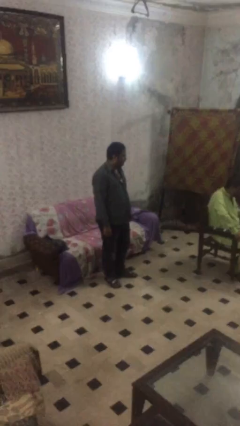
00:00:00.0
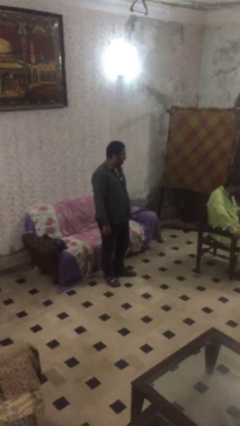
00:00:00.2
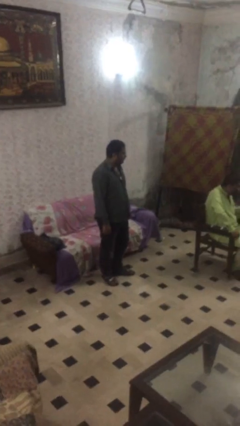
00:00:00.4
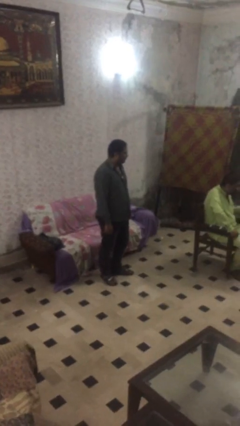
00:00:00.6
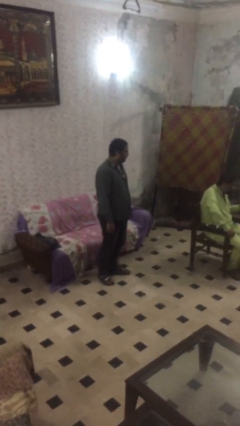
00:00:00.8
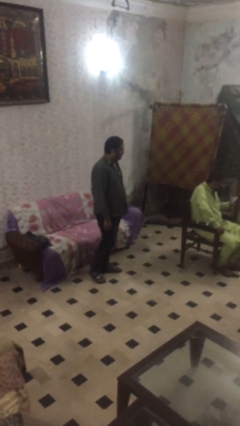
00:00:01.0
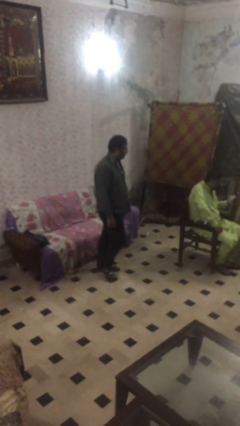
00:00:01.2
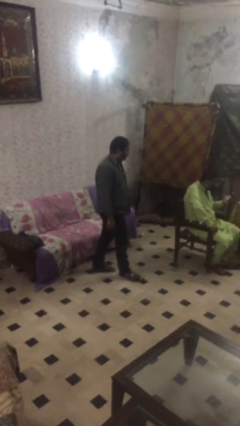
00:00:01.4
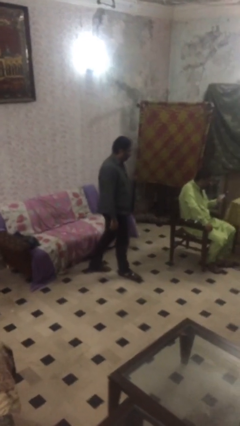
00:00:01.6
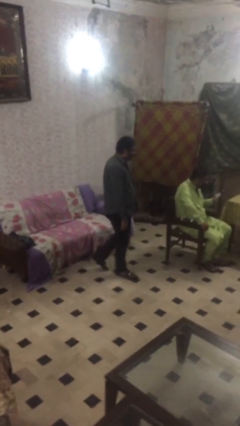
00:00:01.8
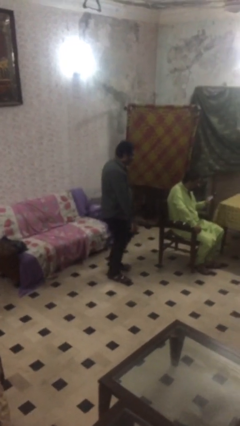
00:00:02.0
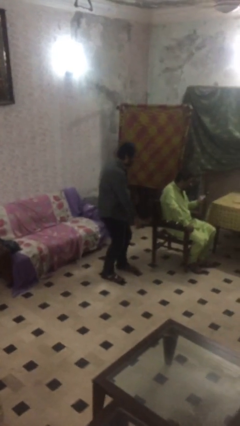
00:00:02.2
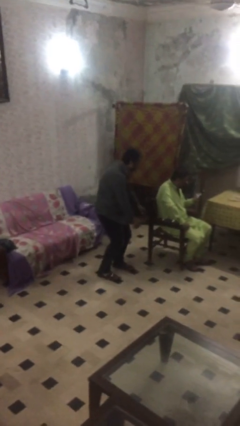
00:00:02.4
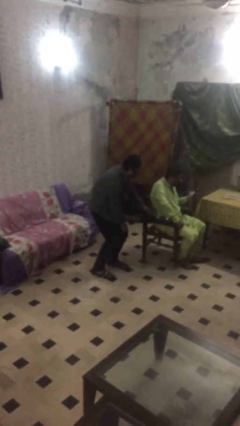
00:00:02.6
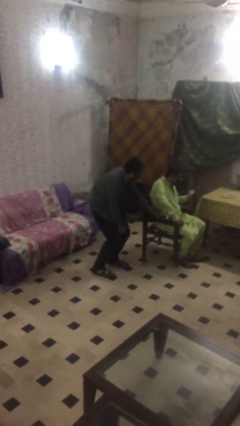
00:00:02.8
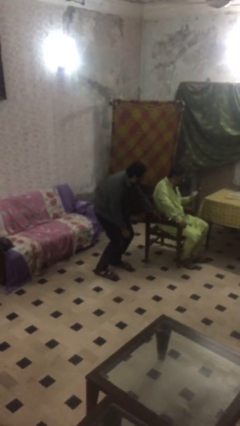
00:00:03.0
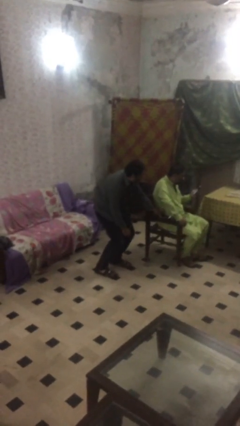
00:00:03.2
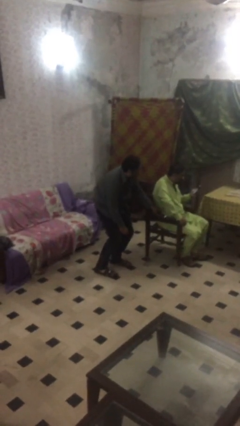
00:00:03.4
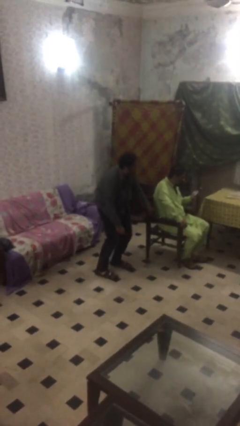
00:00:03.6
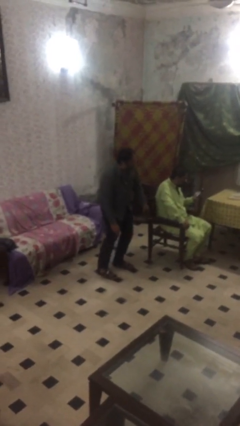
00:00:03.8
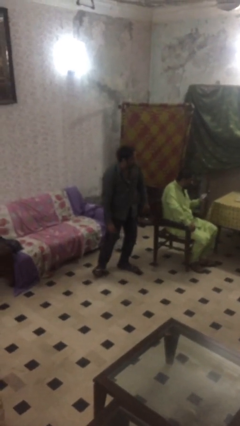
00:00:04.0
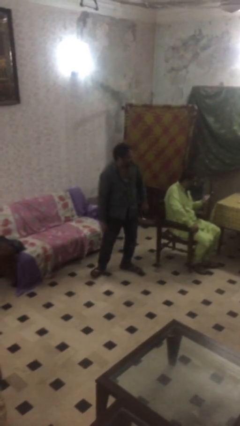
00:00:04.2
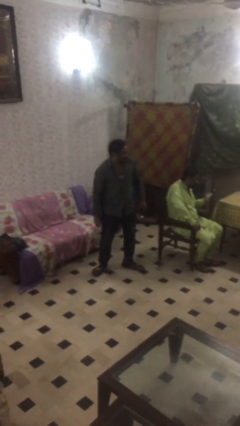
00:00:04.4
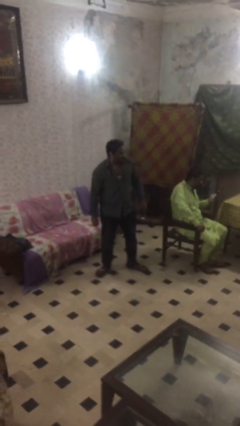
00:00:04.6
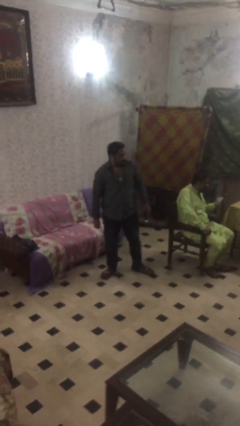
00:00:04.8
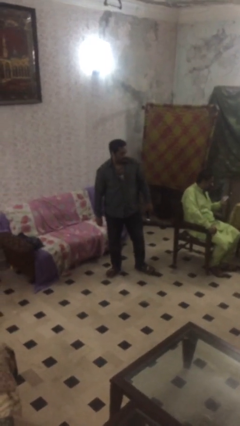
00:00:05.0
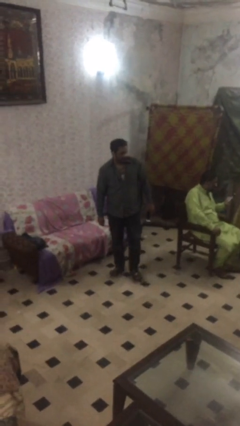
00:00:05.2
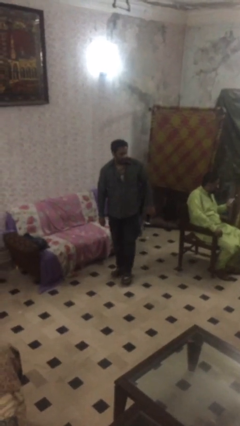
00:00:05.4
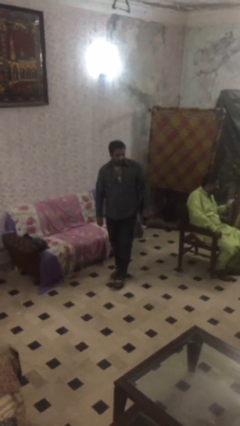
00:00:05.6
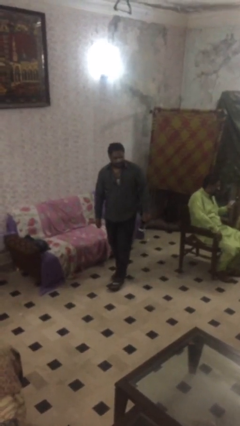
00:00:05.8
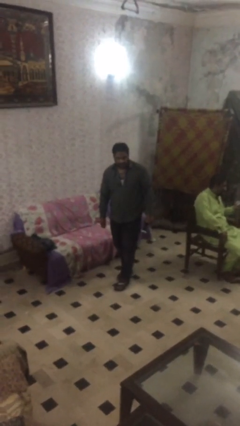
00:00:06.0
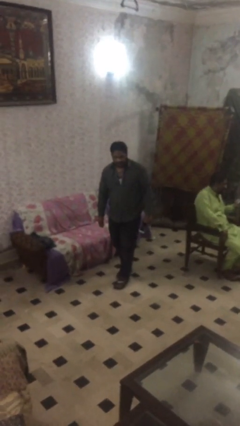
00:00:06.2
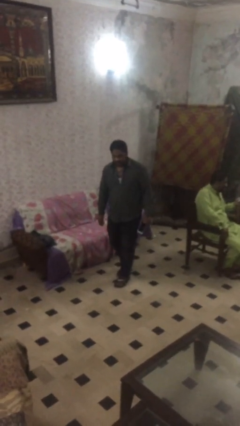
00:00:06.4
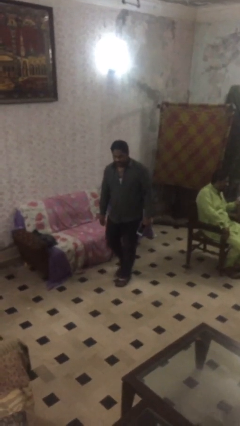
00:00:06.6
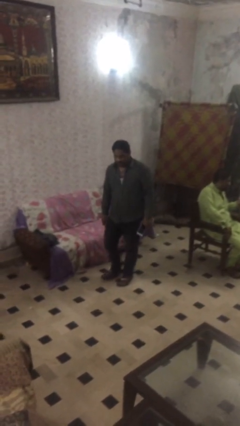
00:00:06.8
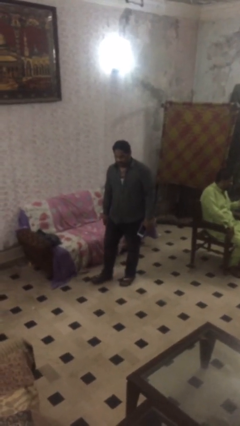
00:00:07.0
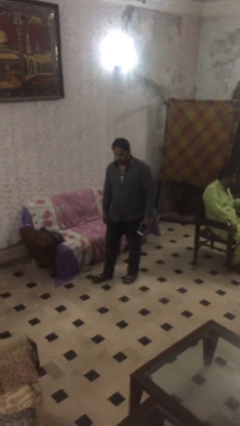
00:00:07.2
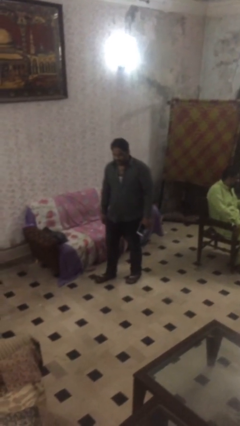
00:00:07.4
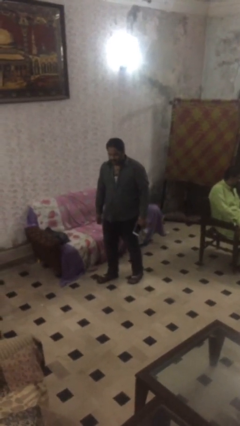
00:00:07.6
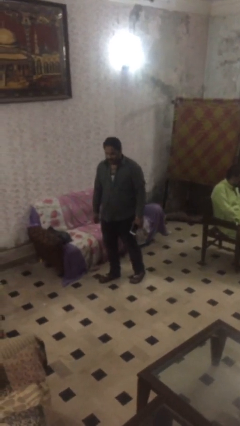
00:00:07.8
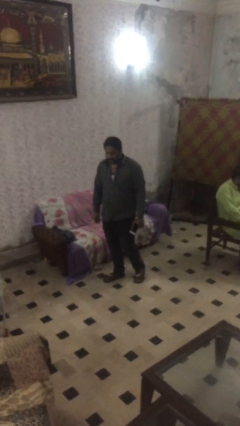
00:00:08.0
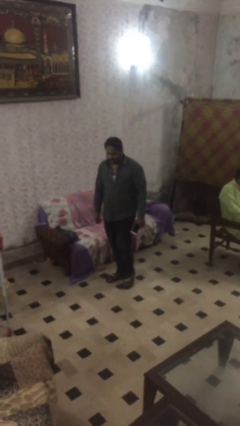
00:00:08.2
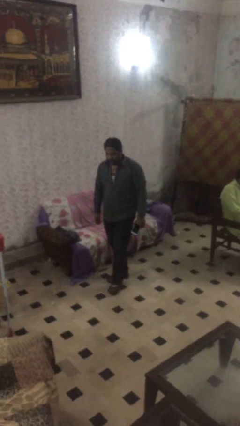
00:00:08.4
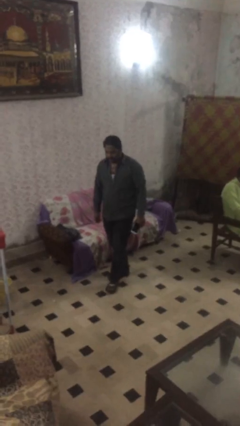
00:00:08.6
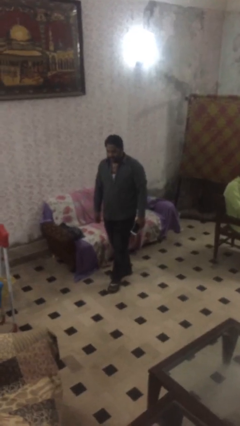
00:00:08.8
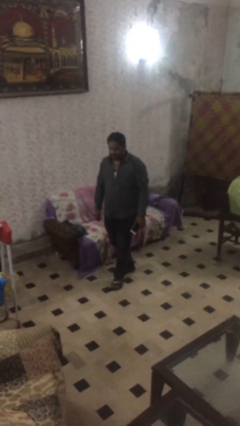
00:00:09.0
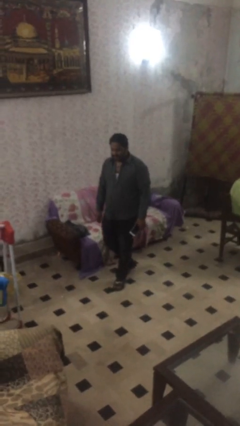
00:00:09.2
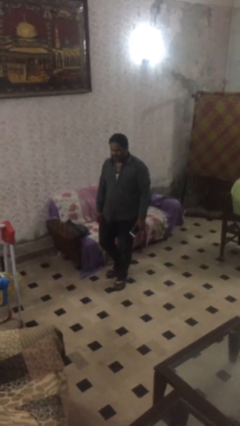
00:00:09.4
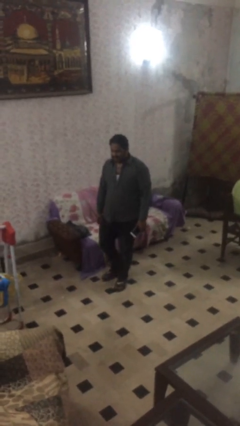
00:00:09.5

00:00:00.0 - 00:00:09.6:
person steals object from person

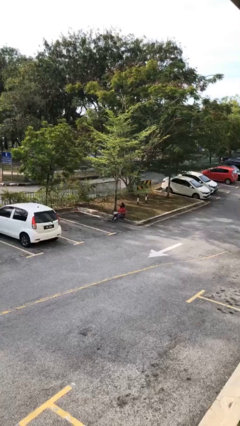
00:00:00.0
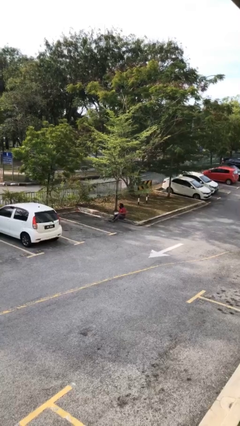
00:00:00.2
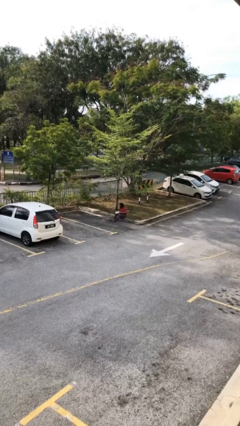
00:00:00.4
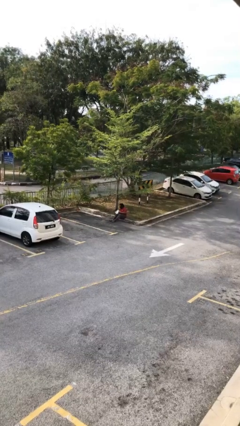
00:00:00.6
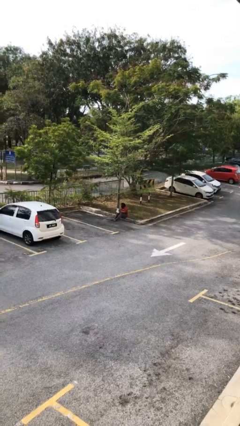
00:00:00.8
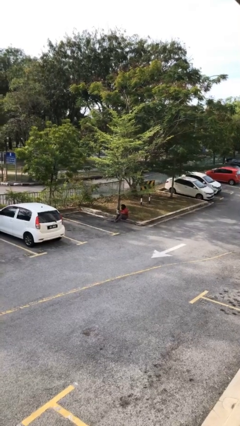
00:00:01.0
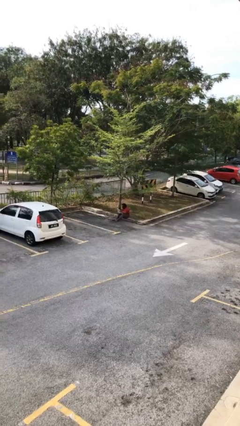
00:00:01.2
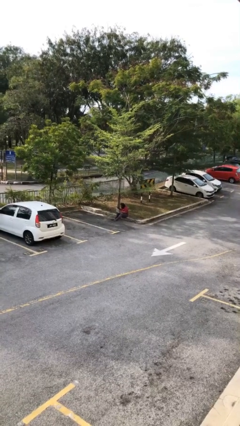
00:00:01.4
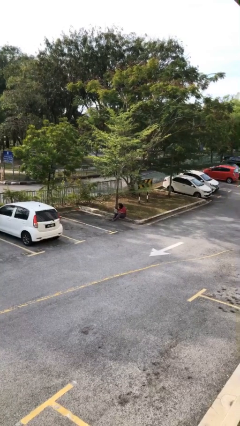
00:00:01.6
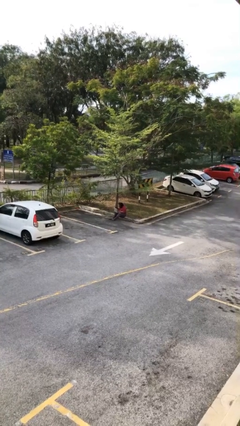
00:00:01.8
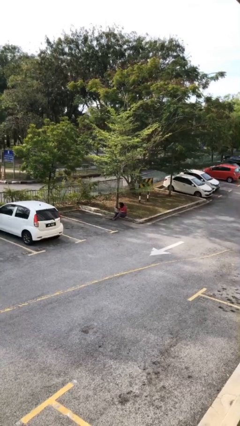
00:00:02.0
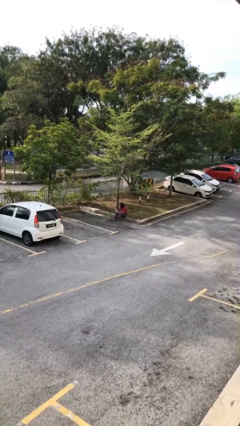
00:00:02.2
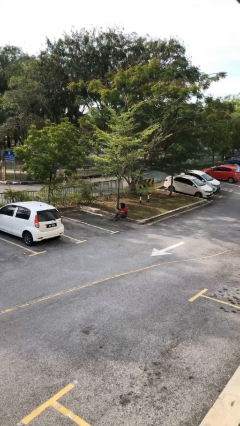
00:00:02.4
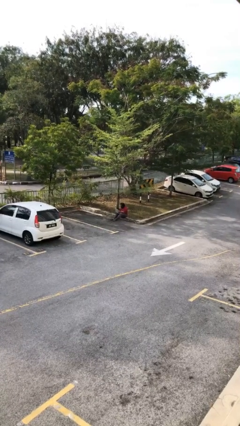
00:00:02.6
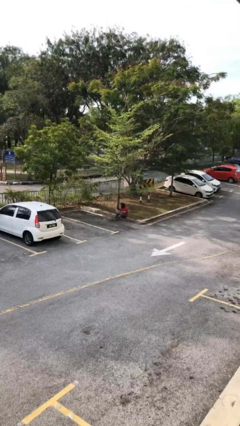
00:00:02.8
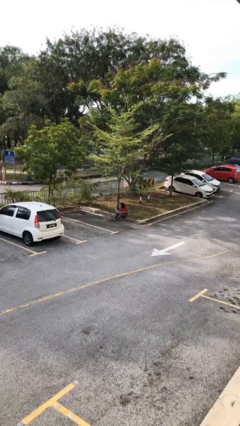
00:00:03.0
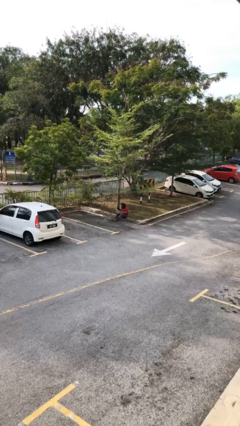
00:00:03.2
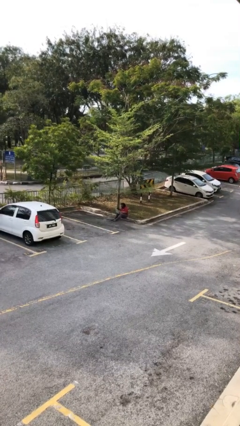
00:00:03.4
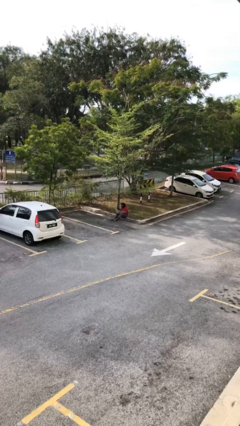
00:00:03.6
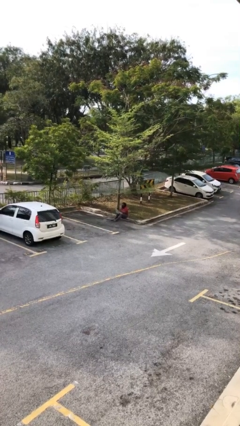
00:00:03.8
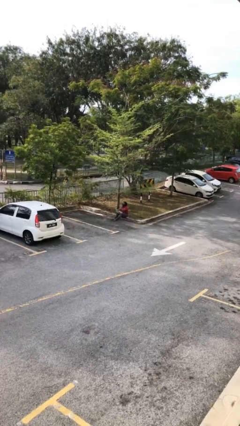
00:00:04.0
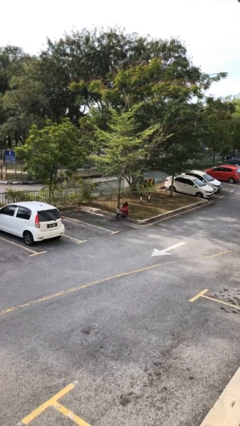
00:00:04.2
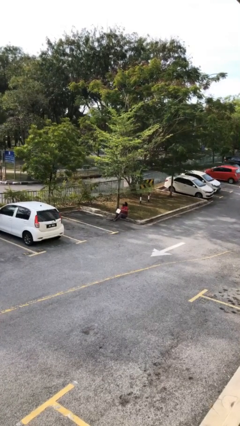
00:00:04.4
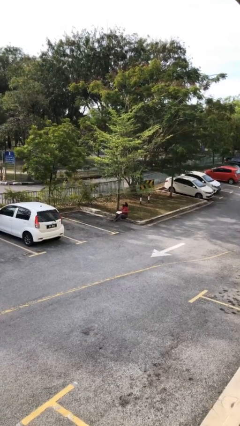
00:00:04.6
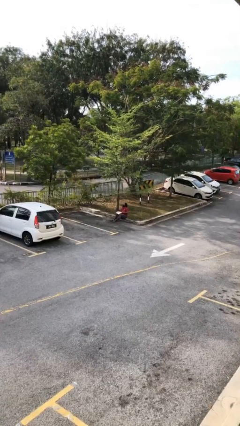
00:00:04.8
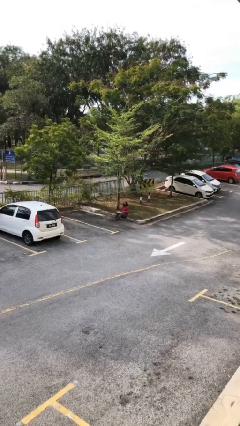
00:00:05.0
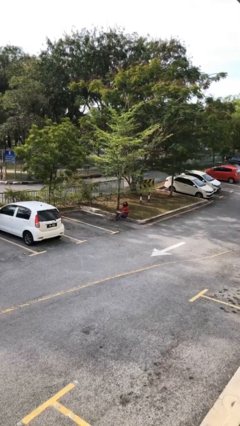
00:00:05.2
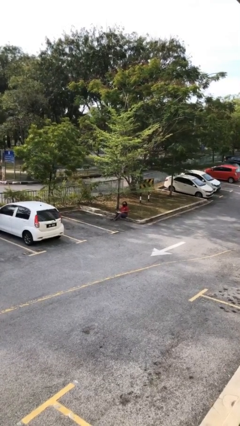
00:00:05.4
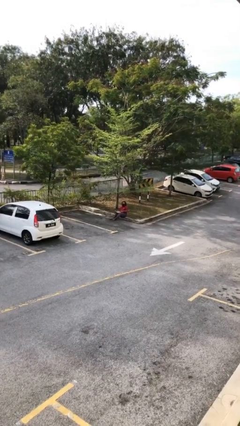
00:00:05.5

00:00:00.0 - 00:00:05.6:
person interacts with laptop

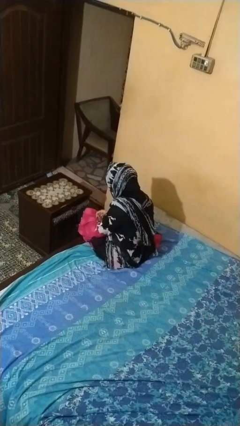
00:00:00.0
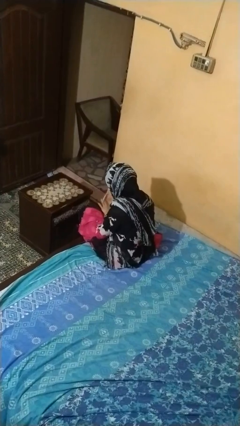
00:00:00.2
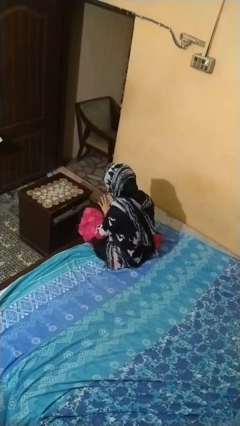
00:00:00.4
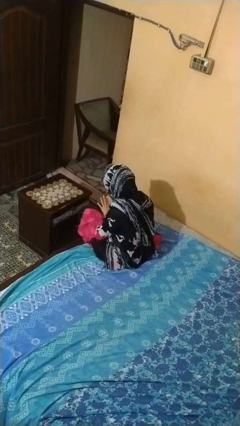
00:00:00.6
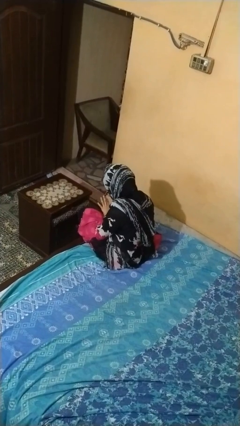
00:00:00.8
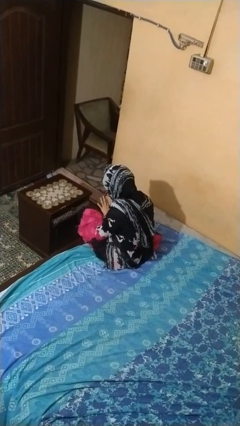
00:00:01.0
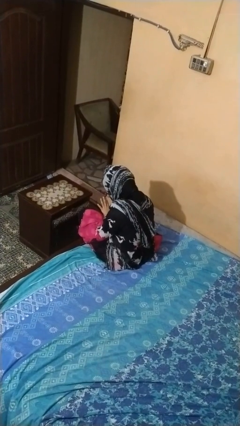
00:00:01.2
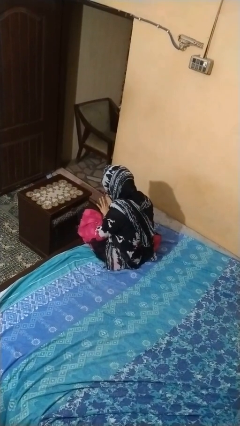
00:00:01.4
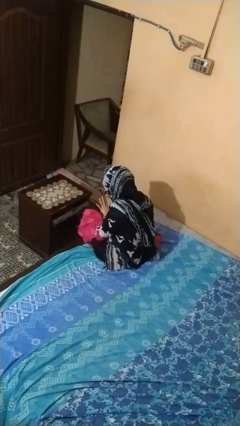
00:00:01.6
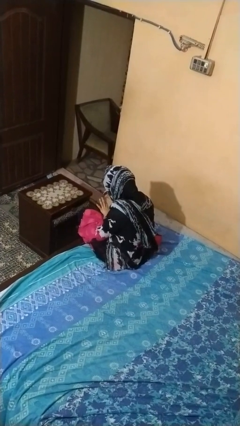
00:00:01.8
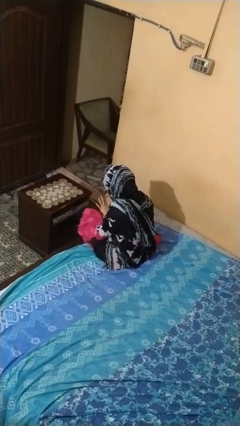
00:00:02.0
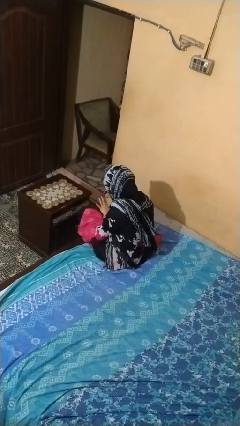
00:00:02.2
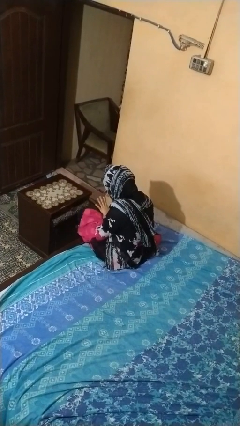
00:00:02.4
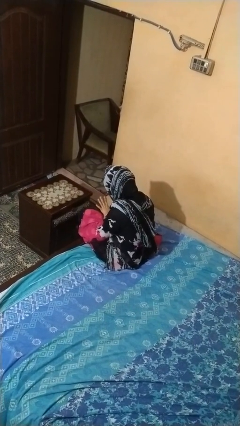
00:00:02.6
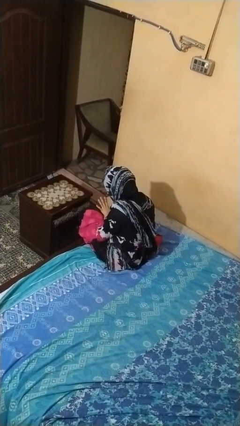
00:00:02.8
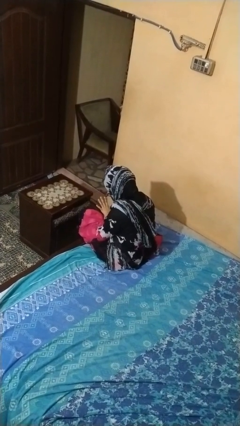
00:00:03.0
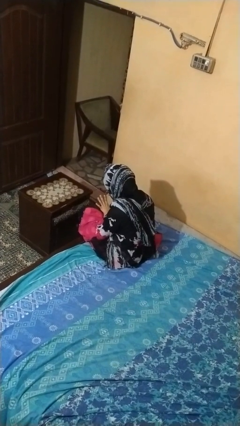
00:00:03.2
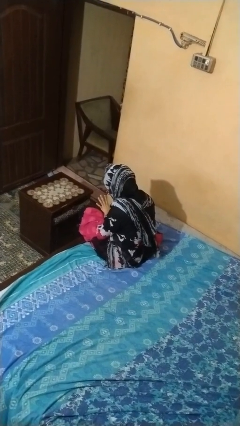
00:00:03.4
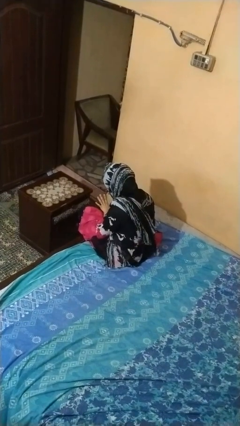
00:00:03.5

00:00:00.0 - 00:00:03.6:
person clips fingernails
